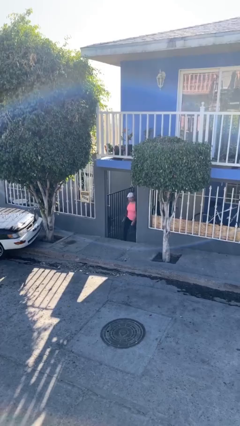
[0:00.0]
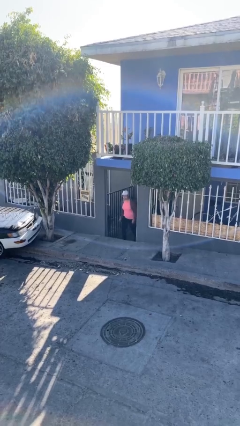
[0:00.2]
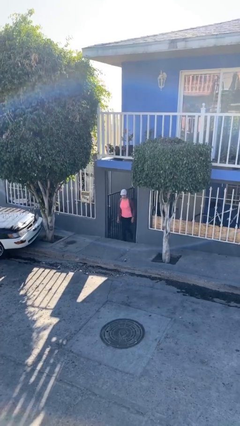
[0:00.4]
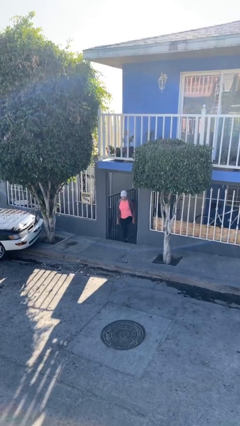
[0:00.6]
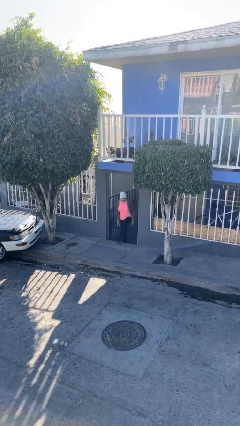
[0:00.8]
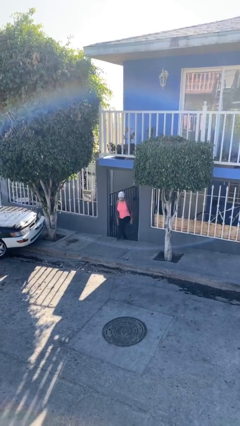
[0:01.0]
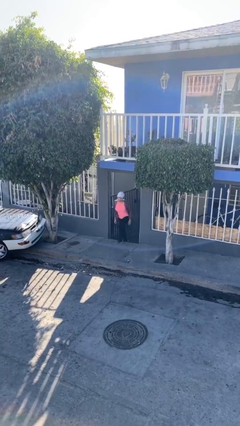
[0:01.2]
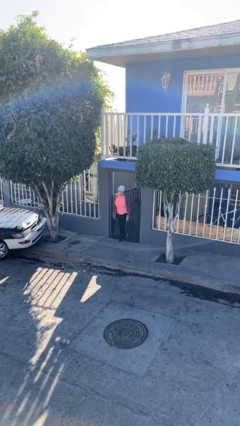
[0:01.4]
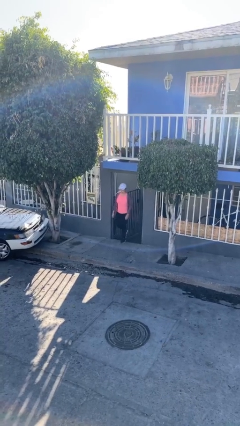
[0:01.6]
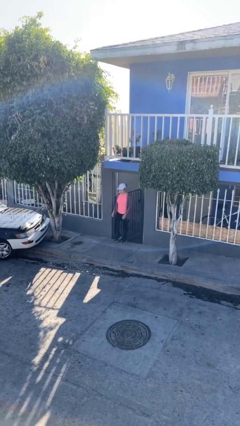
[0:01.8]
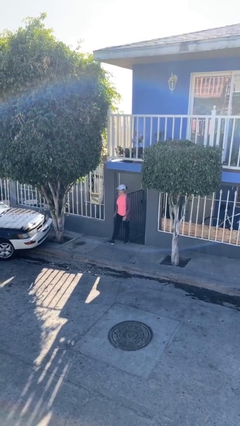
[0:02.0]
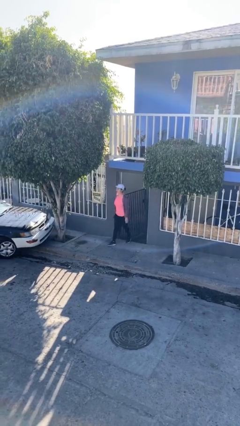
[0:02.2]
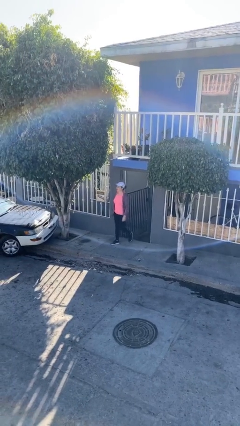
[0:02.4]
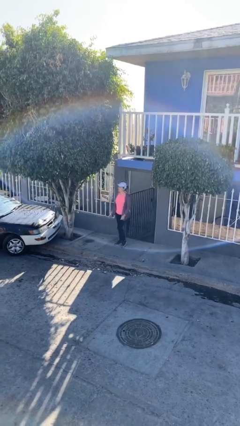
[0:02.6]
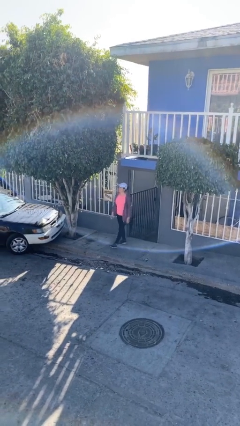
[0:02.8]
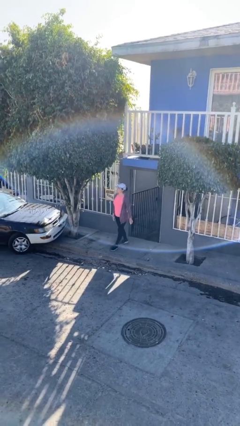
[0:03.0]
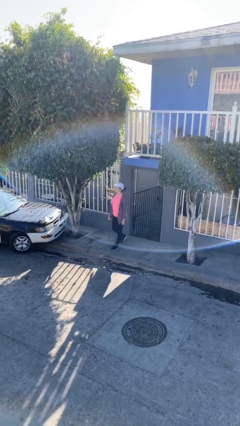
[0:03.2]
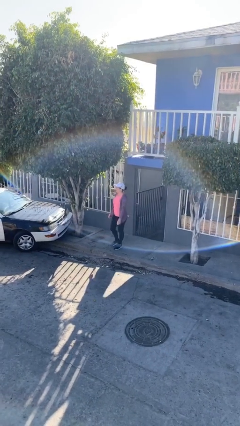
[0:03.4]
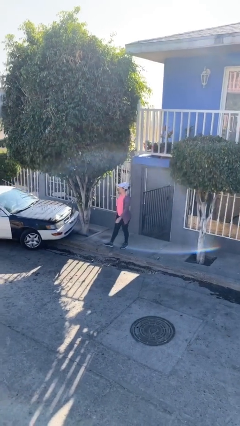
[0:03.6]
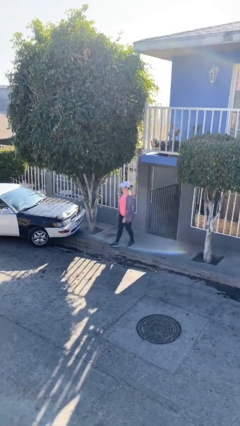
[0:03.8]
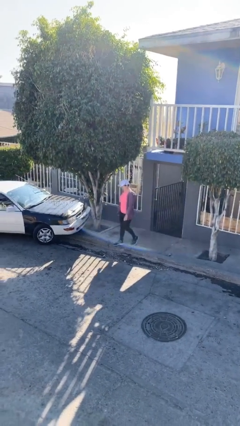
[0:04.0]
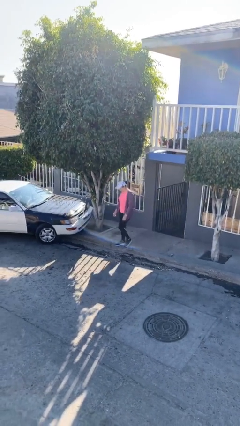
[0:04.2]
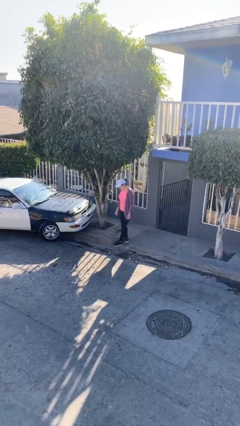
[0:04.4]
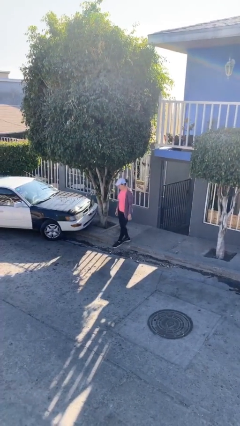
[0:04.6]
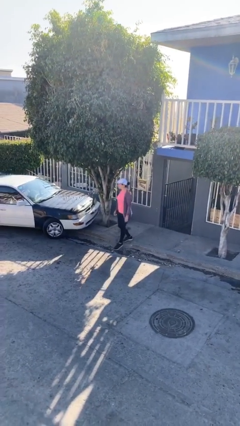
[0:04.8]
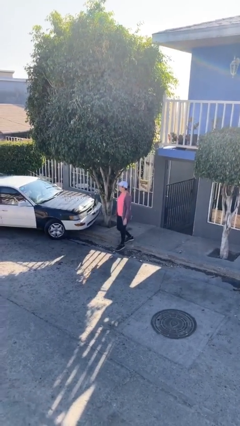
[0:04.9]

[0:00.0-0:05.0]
person enters scene through structure

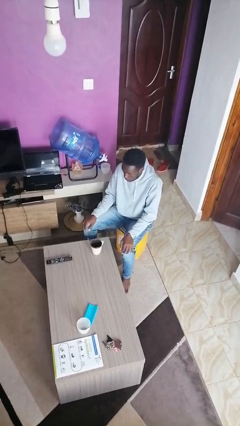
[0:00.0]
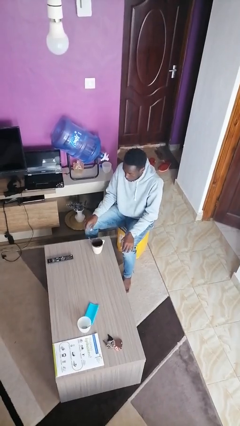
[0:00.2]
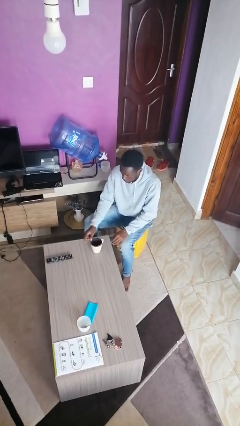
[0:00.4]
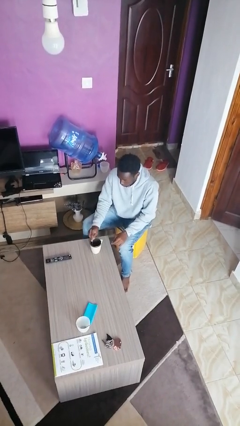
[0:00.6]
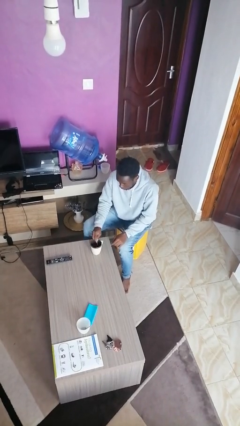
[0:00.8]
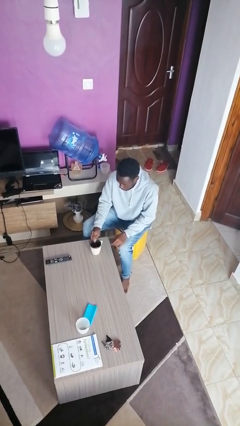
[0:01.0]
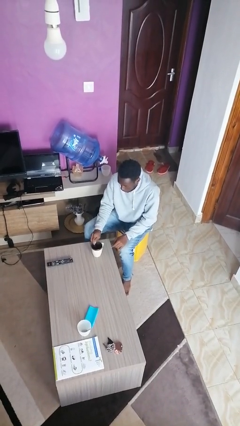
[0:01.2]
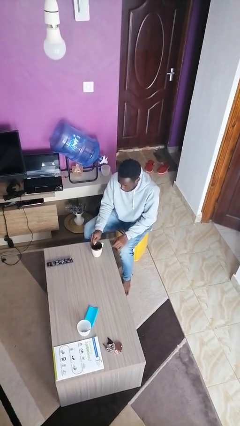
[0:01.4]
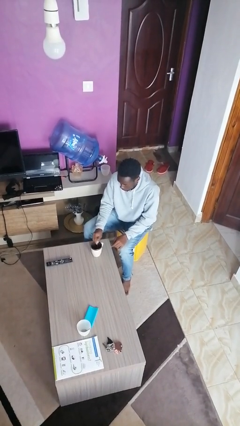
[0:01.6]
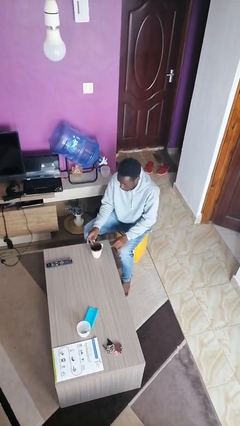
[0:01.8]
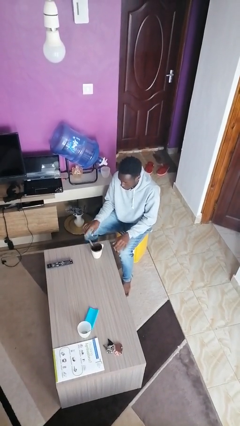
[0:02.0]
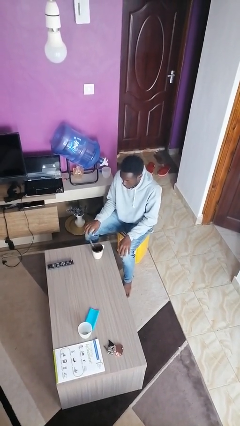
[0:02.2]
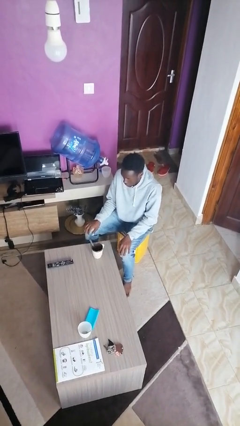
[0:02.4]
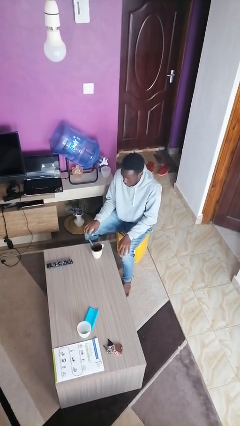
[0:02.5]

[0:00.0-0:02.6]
person stirs mug

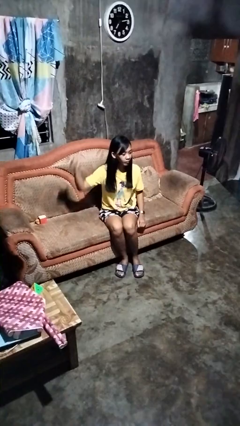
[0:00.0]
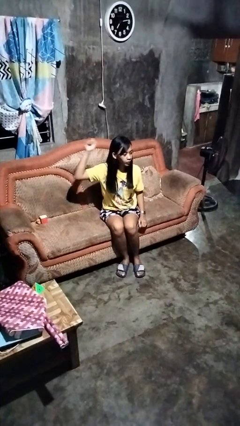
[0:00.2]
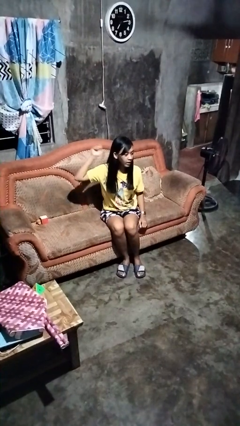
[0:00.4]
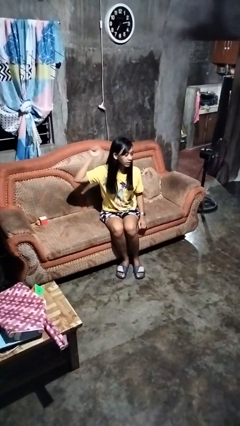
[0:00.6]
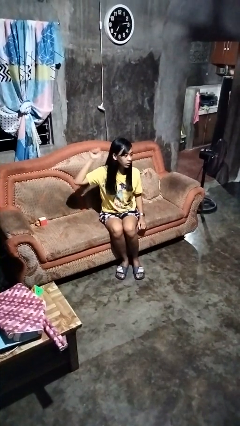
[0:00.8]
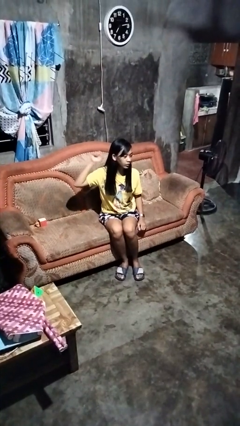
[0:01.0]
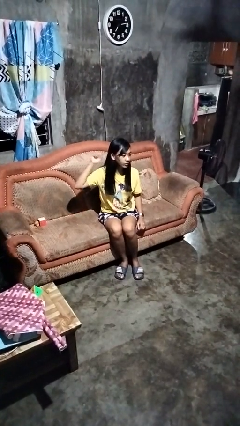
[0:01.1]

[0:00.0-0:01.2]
person gestures behind me

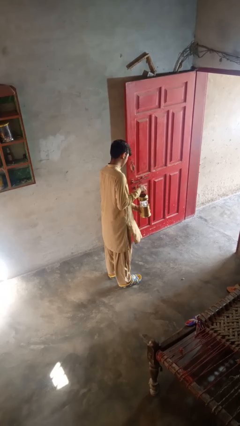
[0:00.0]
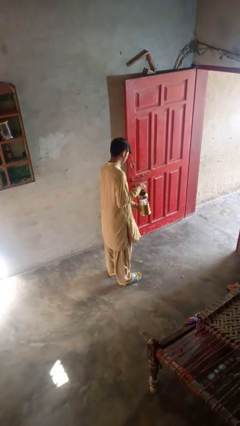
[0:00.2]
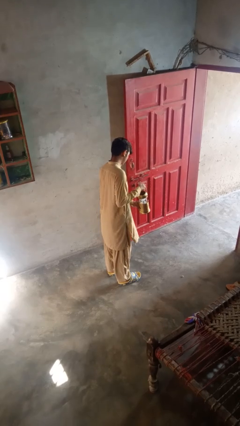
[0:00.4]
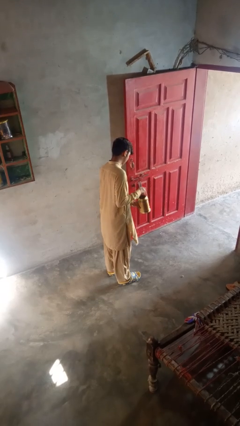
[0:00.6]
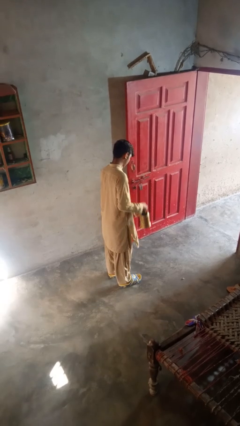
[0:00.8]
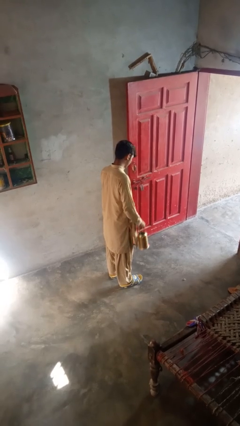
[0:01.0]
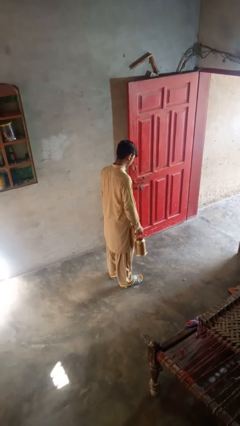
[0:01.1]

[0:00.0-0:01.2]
person turns off lamp

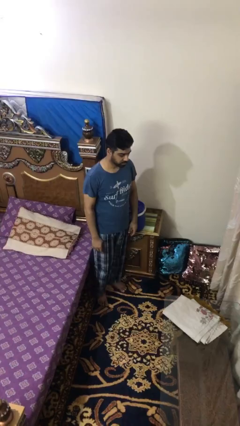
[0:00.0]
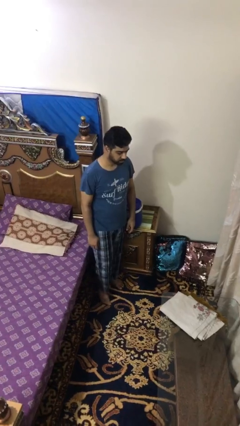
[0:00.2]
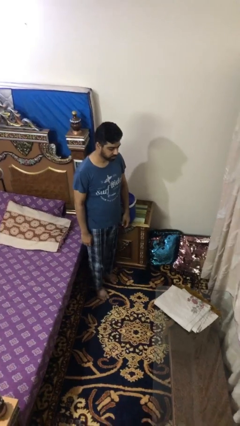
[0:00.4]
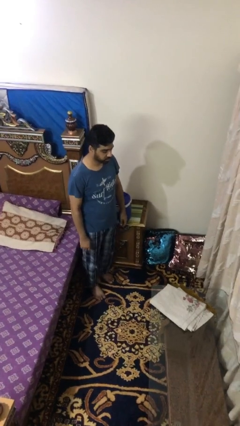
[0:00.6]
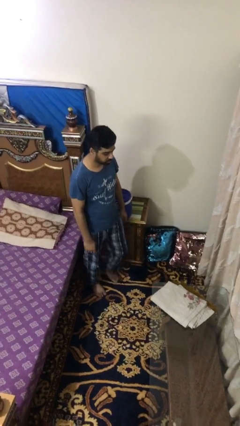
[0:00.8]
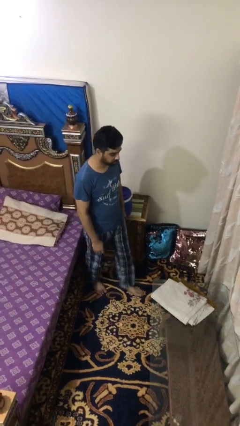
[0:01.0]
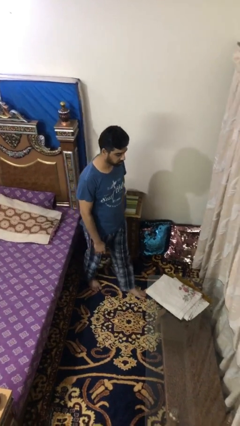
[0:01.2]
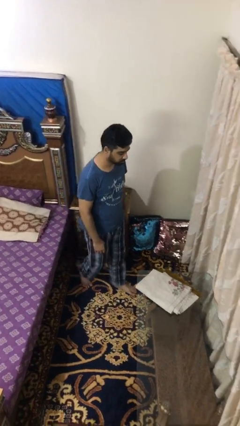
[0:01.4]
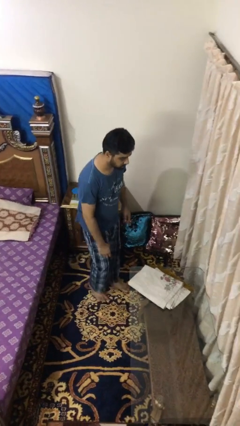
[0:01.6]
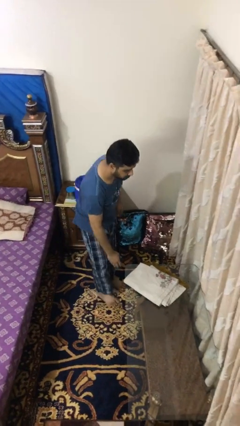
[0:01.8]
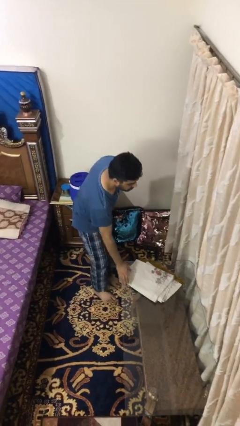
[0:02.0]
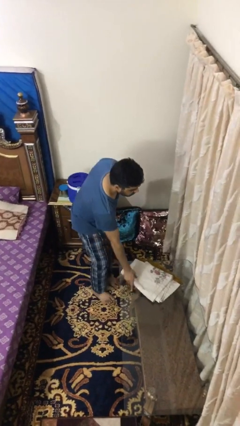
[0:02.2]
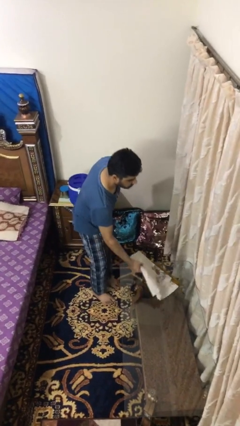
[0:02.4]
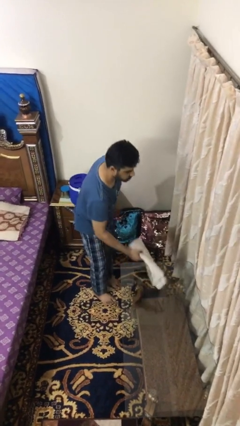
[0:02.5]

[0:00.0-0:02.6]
person picks up object from table

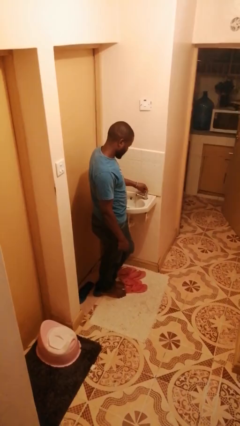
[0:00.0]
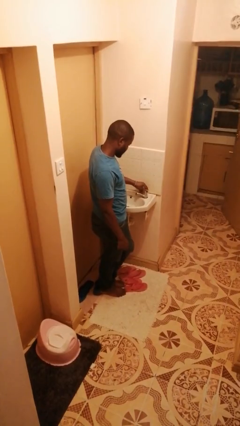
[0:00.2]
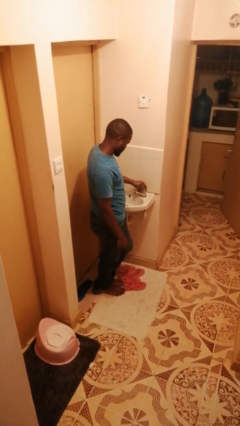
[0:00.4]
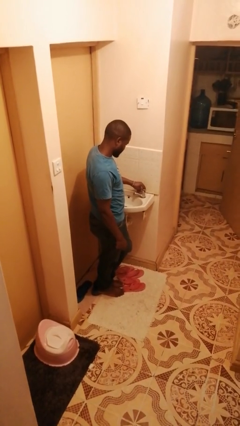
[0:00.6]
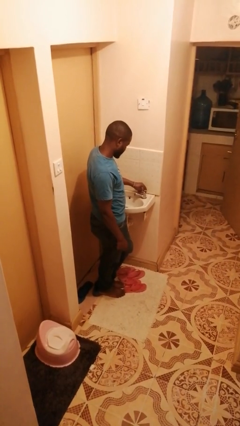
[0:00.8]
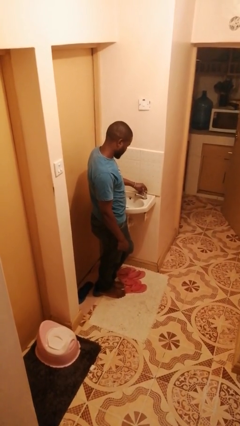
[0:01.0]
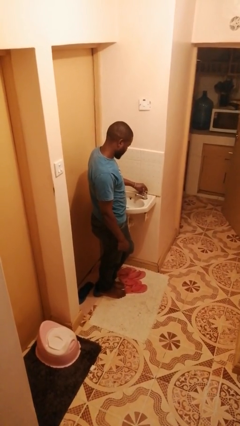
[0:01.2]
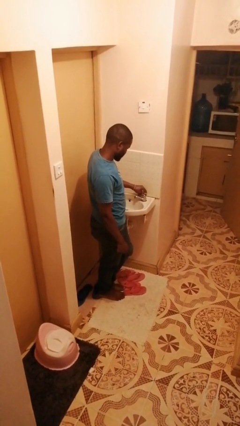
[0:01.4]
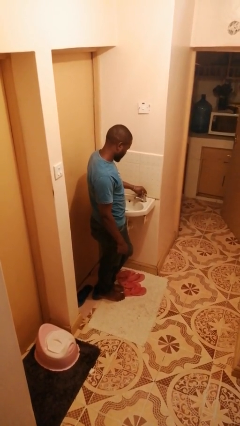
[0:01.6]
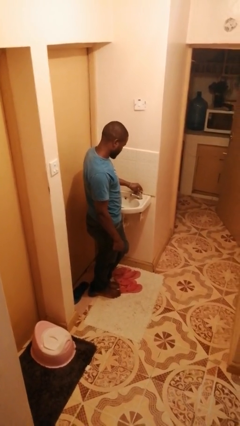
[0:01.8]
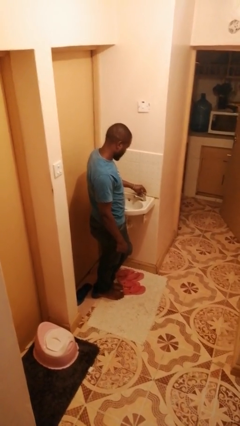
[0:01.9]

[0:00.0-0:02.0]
person turns off faucet

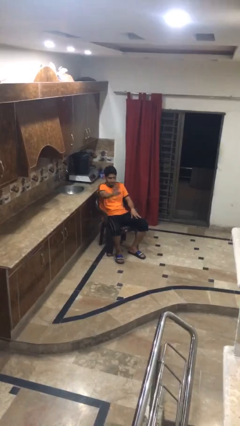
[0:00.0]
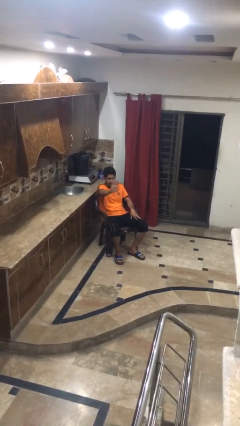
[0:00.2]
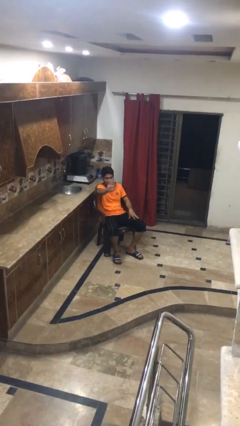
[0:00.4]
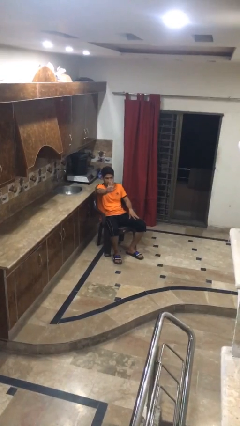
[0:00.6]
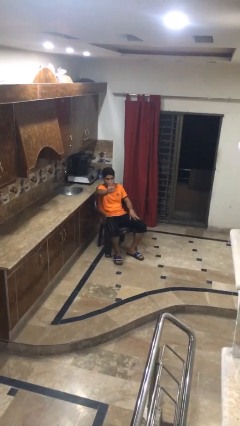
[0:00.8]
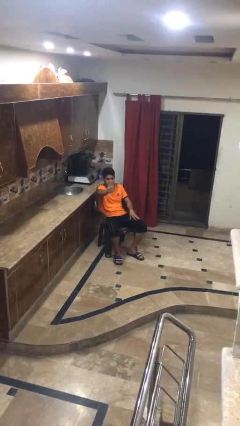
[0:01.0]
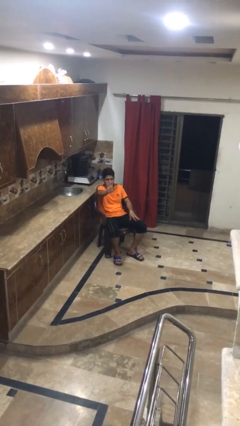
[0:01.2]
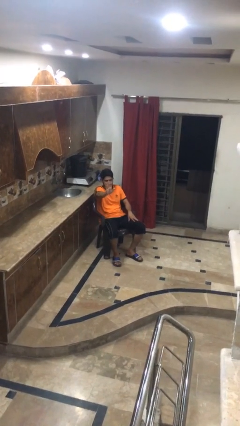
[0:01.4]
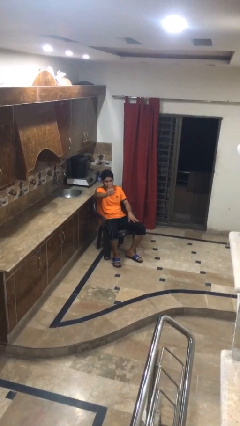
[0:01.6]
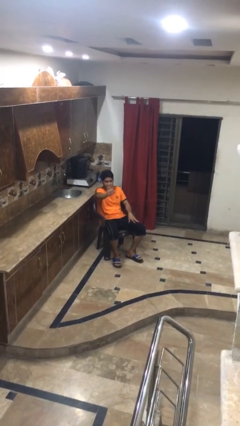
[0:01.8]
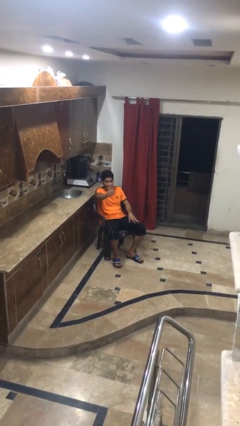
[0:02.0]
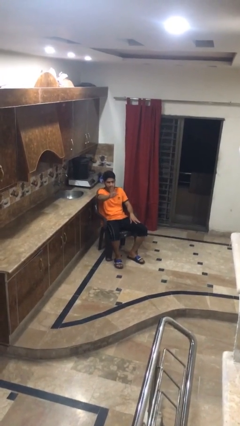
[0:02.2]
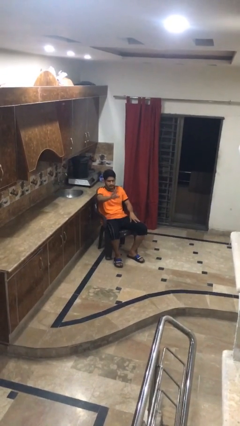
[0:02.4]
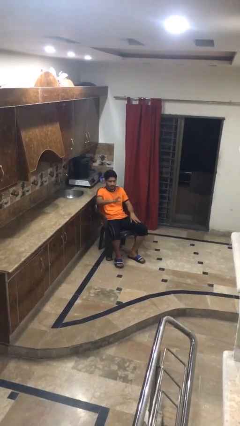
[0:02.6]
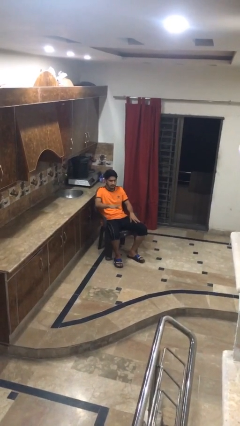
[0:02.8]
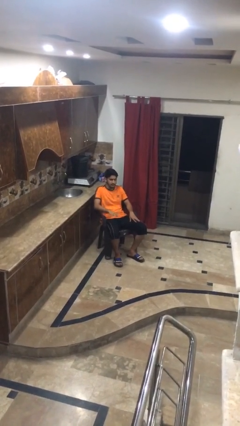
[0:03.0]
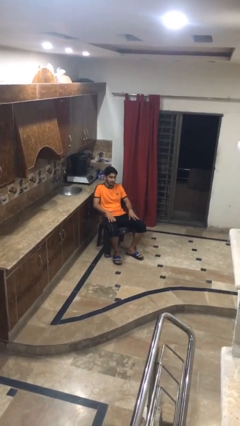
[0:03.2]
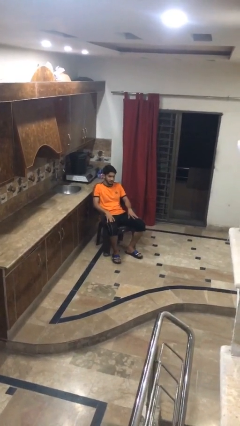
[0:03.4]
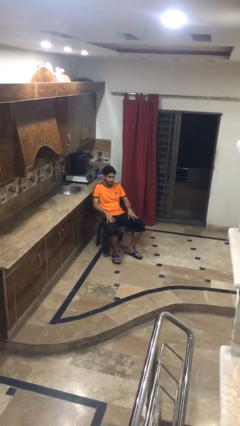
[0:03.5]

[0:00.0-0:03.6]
person waves at person
